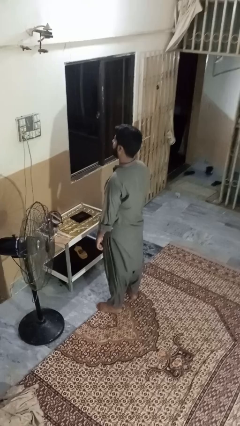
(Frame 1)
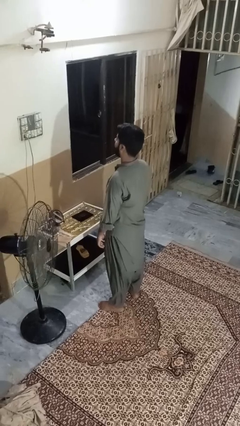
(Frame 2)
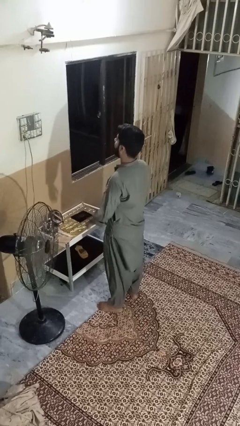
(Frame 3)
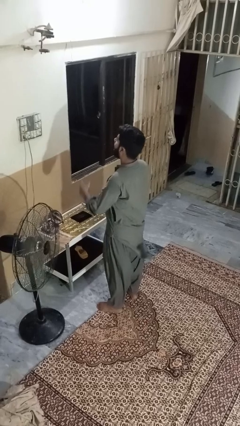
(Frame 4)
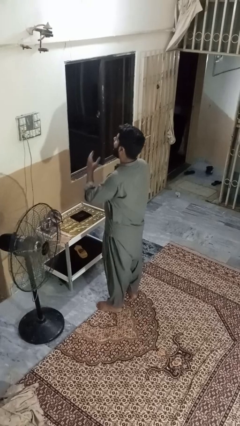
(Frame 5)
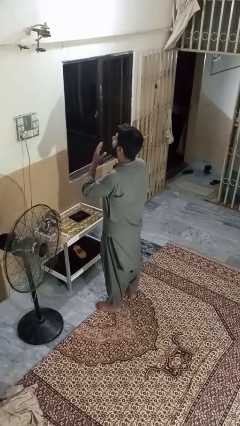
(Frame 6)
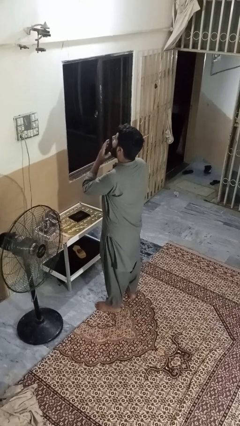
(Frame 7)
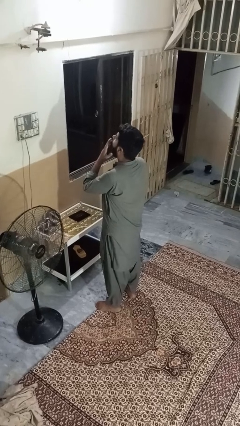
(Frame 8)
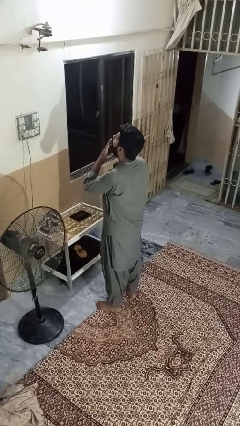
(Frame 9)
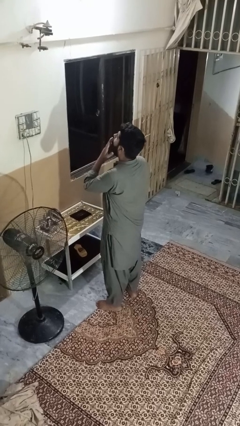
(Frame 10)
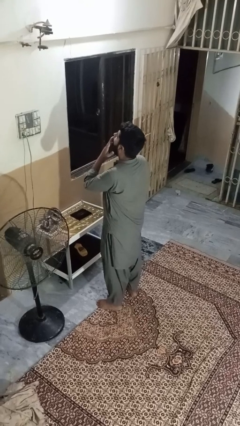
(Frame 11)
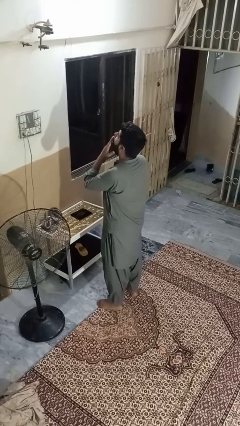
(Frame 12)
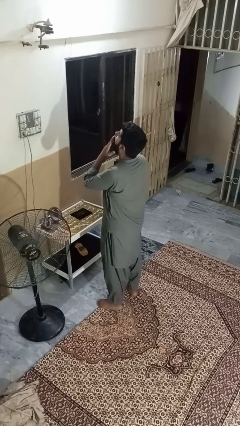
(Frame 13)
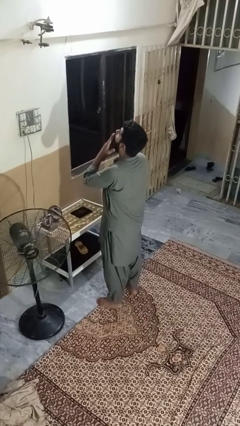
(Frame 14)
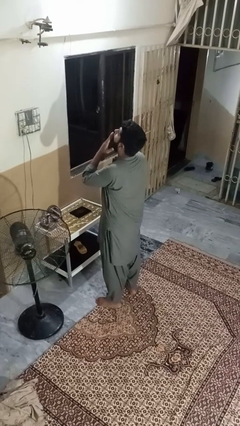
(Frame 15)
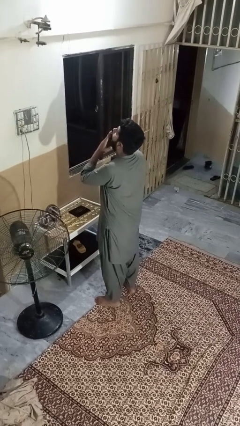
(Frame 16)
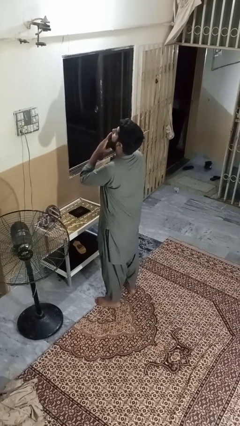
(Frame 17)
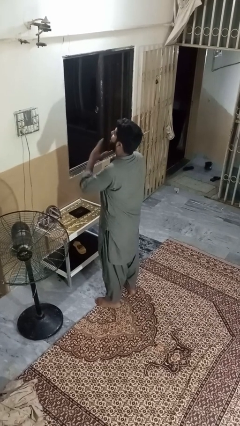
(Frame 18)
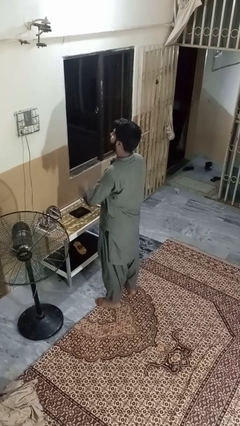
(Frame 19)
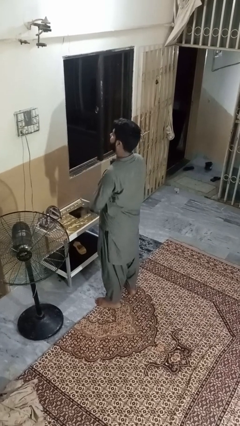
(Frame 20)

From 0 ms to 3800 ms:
person yawns

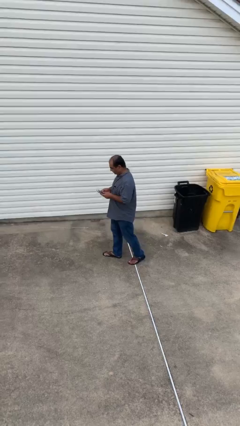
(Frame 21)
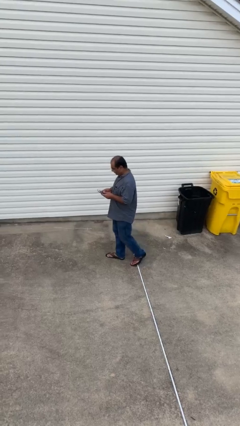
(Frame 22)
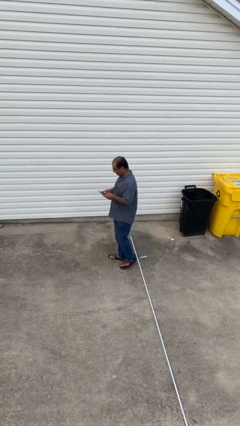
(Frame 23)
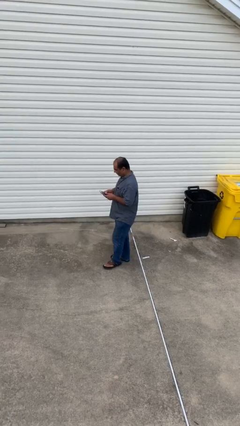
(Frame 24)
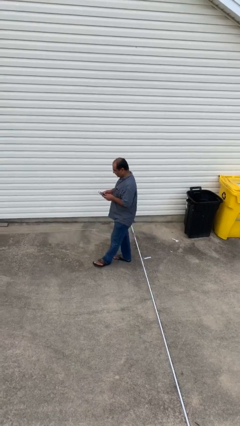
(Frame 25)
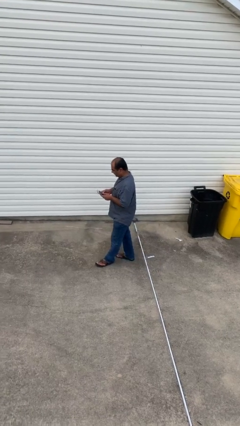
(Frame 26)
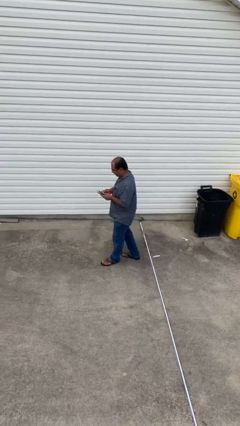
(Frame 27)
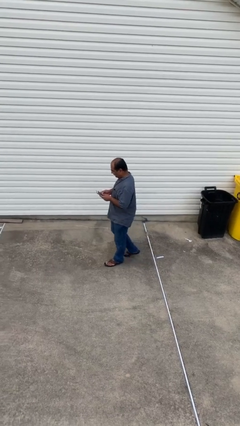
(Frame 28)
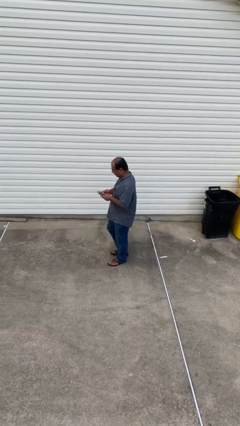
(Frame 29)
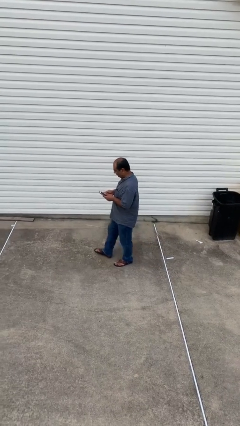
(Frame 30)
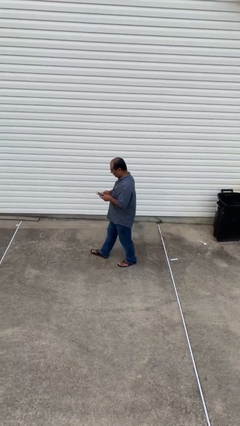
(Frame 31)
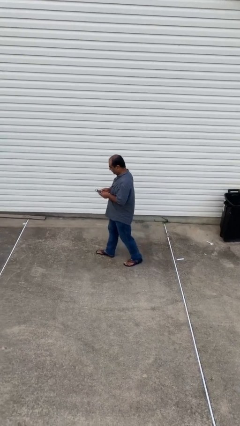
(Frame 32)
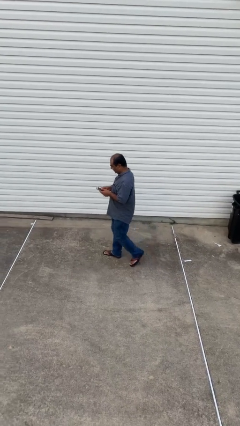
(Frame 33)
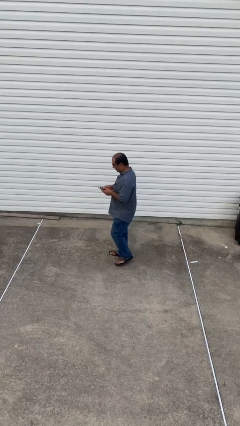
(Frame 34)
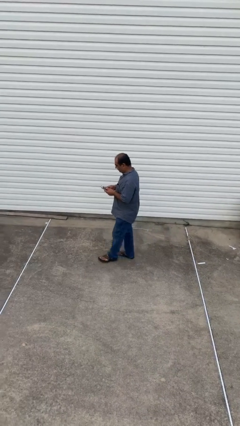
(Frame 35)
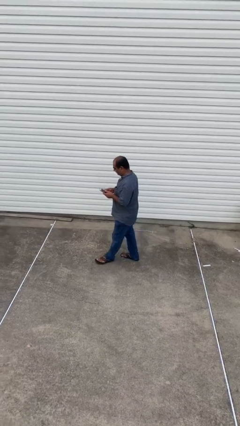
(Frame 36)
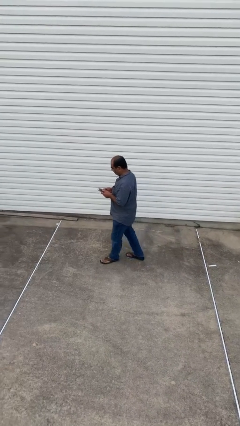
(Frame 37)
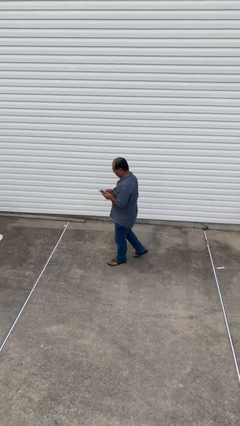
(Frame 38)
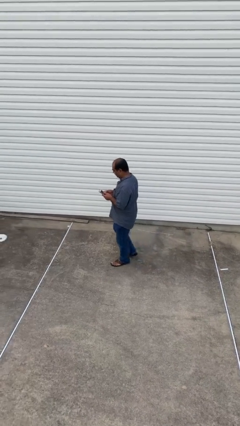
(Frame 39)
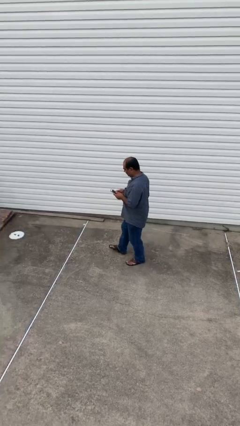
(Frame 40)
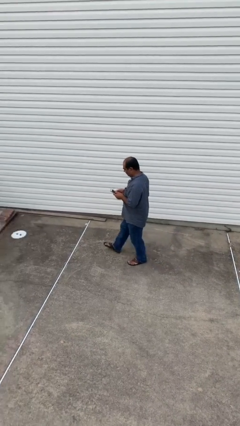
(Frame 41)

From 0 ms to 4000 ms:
person texts on phone

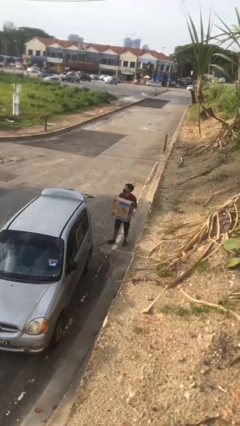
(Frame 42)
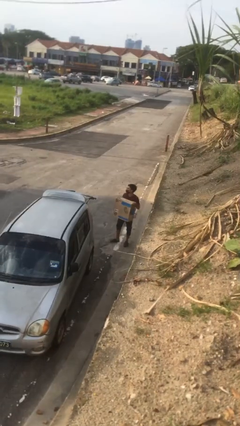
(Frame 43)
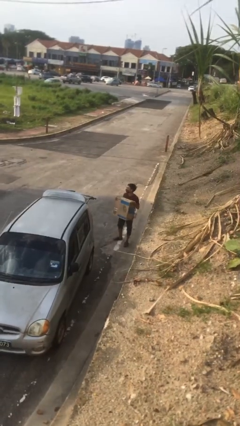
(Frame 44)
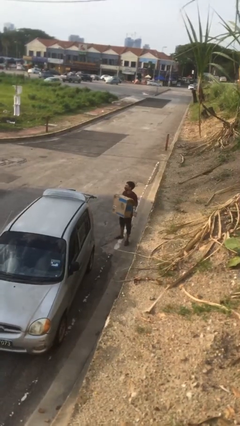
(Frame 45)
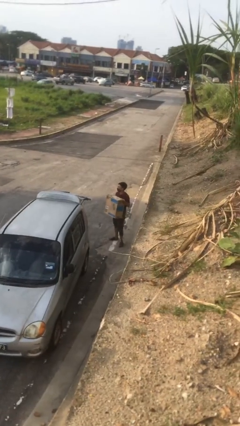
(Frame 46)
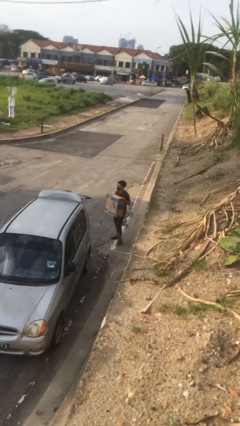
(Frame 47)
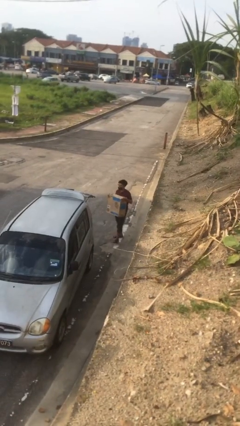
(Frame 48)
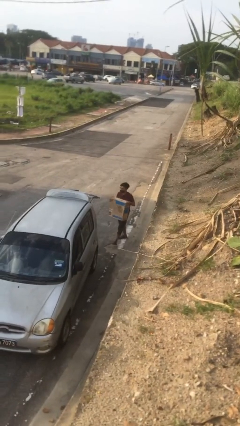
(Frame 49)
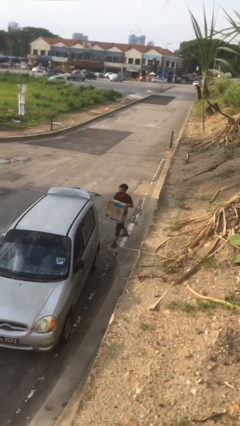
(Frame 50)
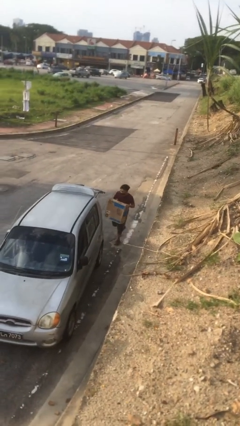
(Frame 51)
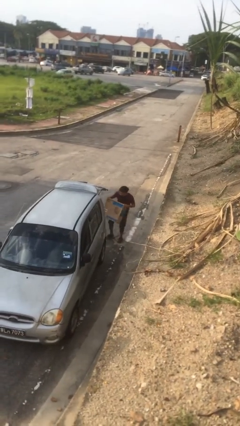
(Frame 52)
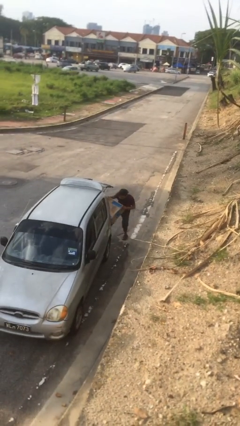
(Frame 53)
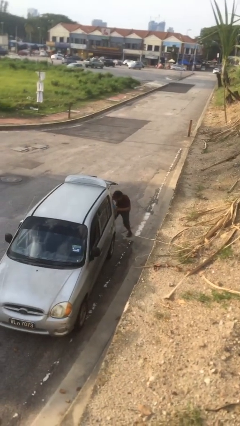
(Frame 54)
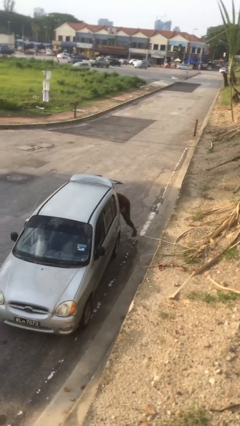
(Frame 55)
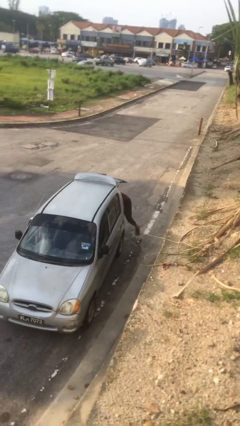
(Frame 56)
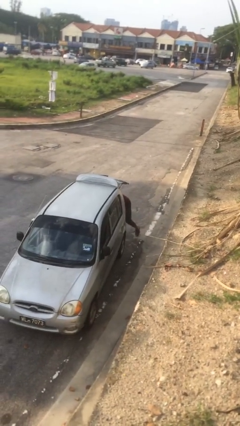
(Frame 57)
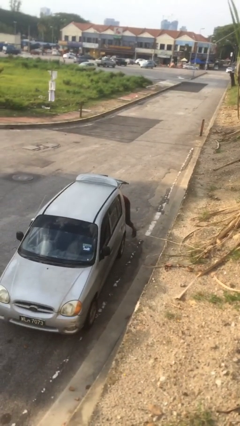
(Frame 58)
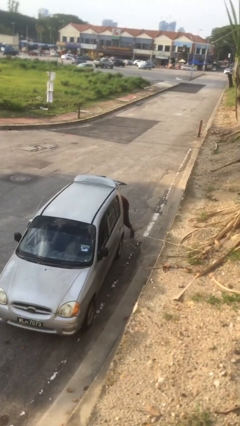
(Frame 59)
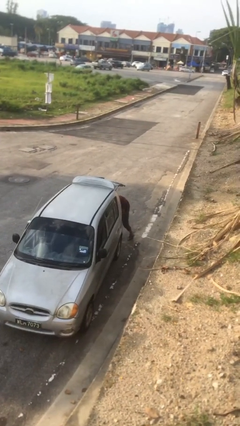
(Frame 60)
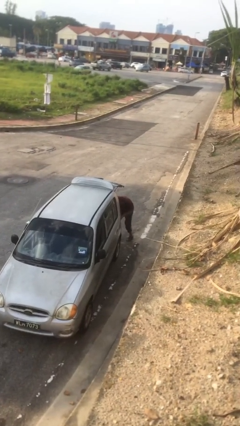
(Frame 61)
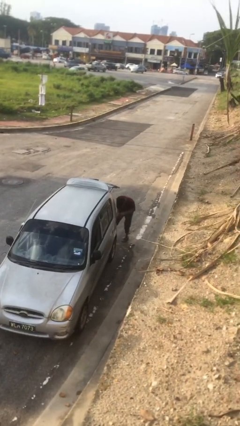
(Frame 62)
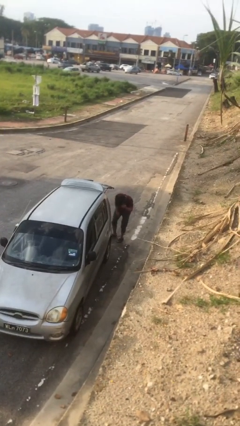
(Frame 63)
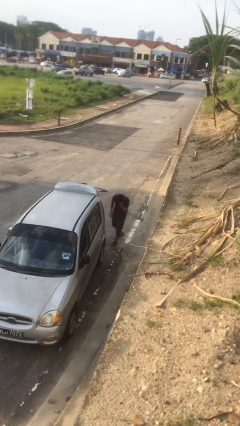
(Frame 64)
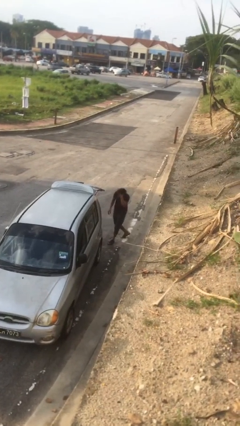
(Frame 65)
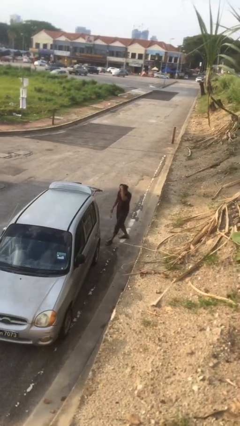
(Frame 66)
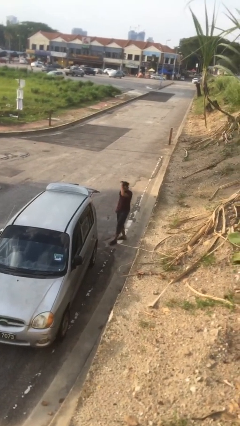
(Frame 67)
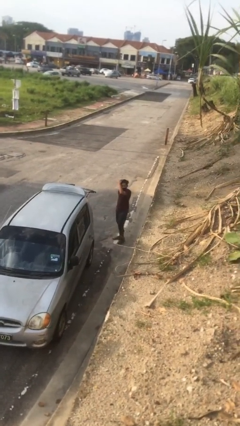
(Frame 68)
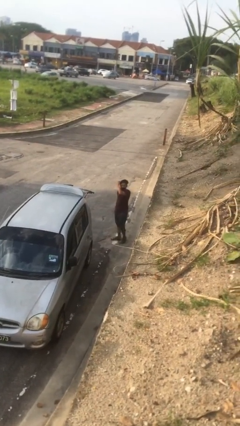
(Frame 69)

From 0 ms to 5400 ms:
person loads car

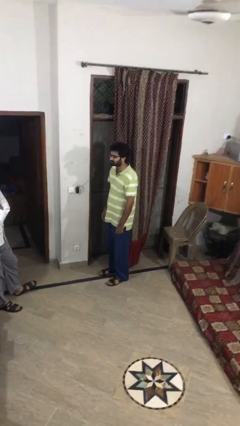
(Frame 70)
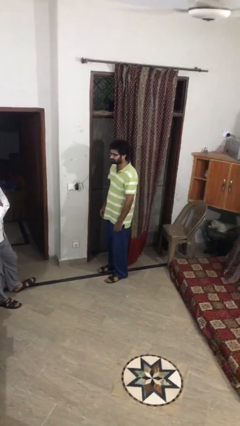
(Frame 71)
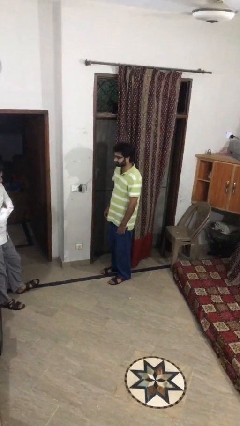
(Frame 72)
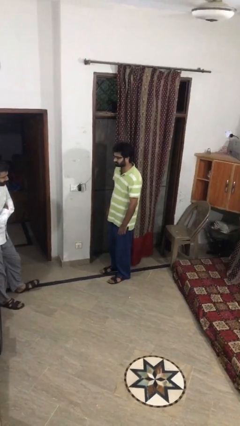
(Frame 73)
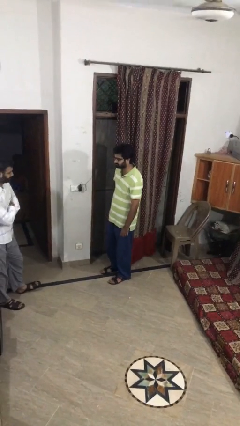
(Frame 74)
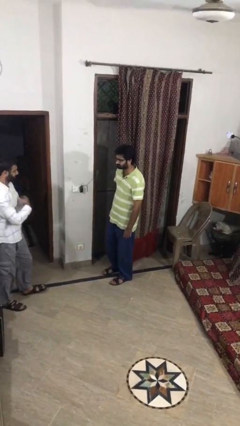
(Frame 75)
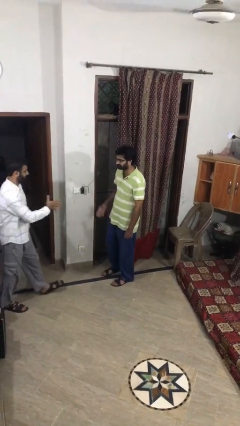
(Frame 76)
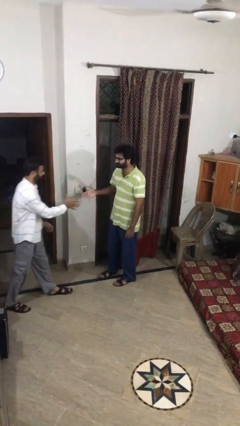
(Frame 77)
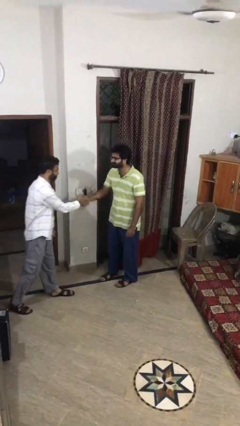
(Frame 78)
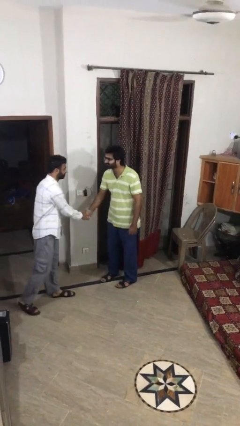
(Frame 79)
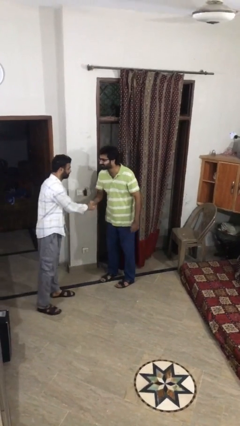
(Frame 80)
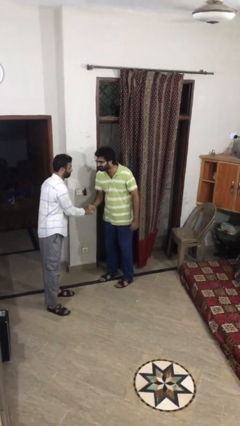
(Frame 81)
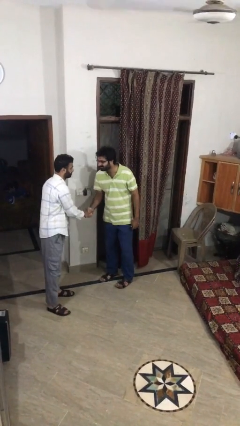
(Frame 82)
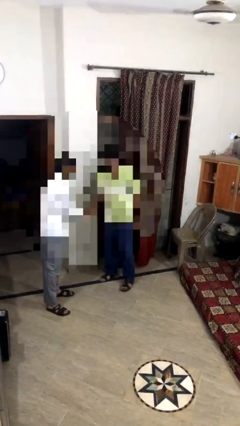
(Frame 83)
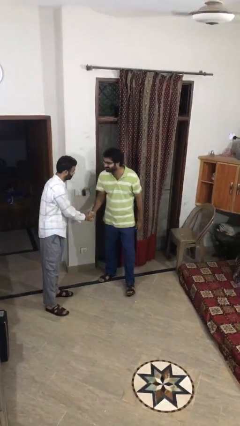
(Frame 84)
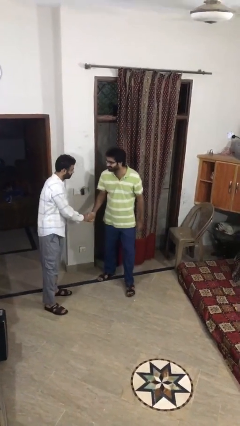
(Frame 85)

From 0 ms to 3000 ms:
person shakes hand

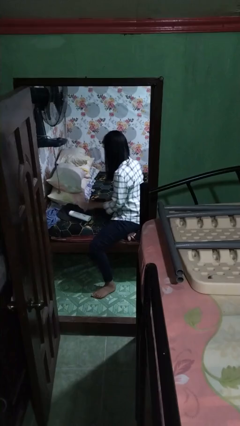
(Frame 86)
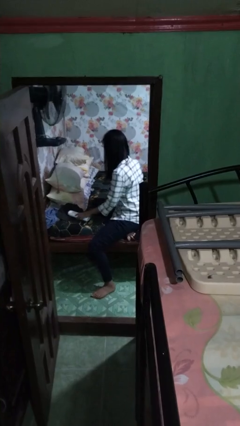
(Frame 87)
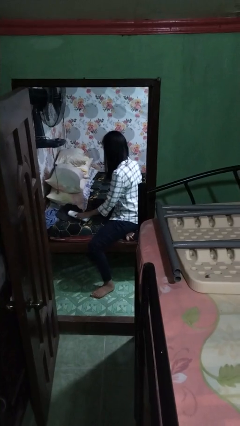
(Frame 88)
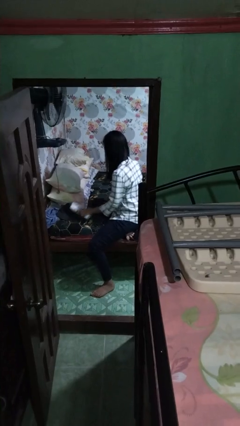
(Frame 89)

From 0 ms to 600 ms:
person picks up object from bed

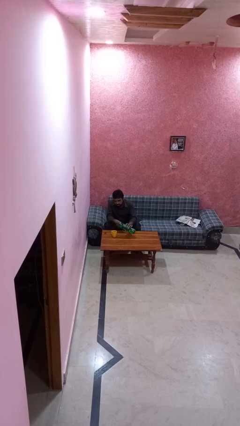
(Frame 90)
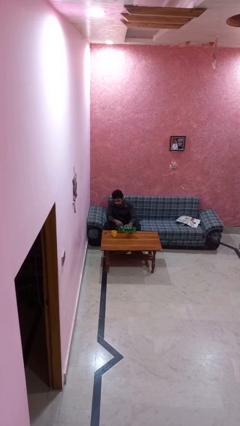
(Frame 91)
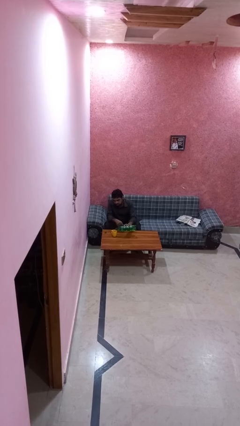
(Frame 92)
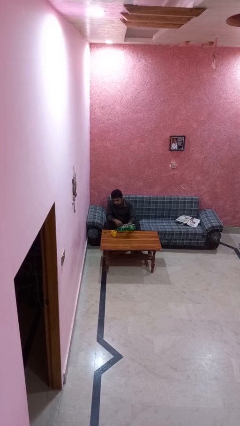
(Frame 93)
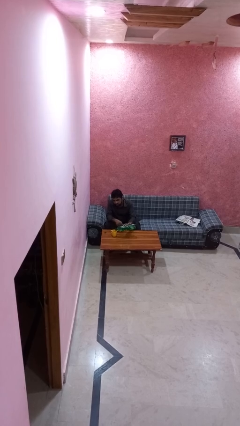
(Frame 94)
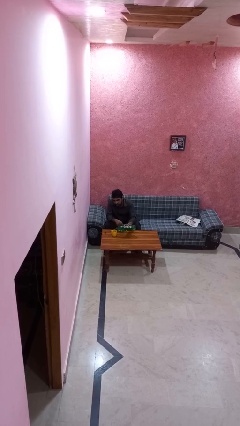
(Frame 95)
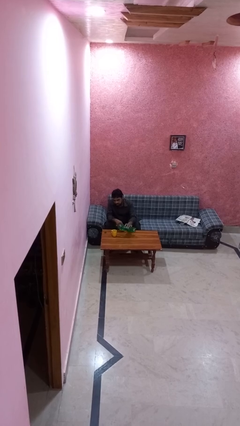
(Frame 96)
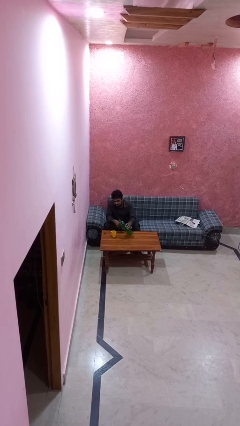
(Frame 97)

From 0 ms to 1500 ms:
person pours liquid into cup
